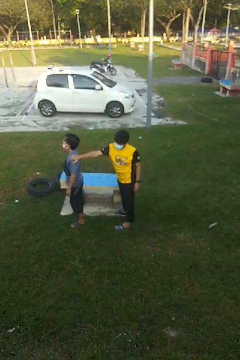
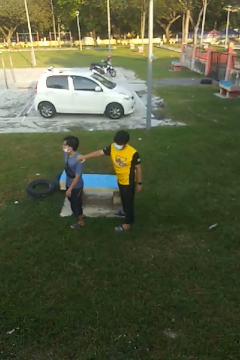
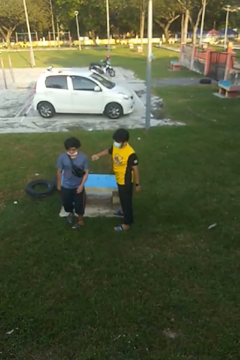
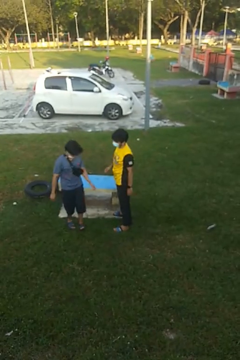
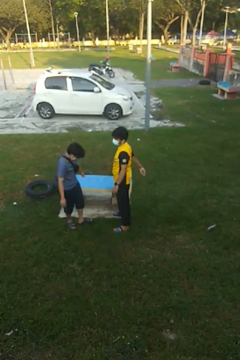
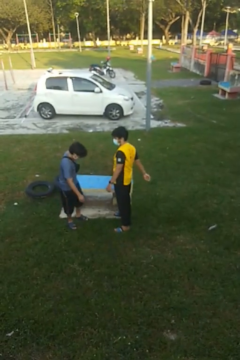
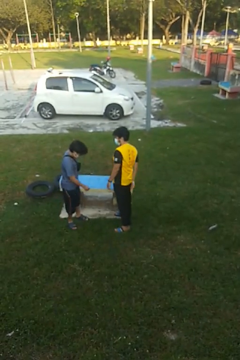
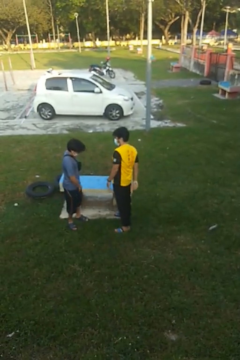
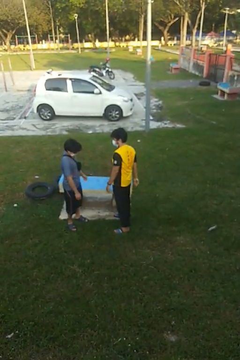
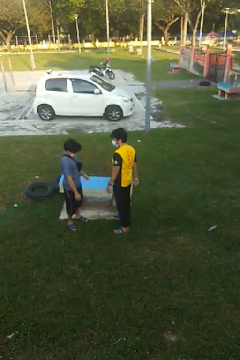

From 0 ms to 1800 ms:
person spins person around

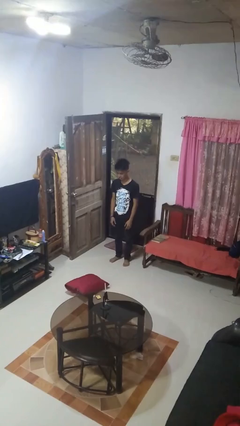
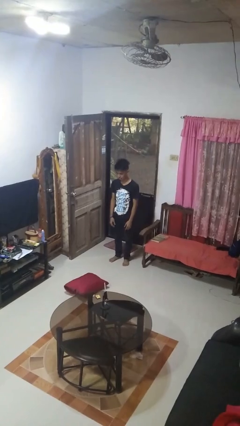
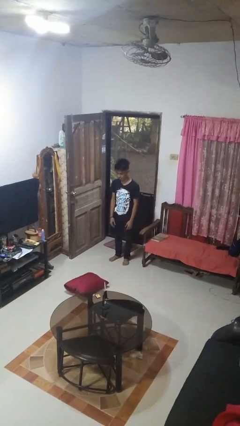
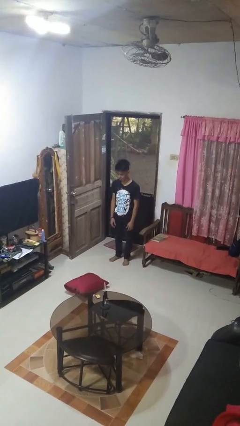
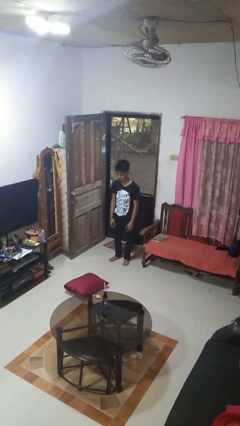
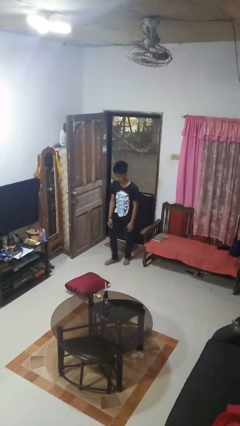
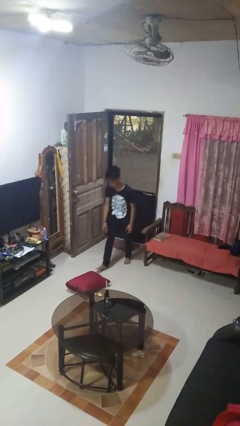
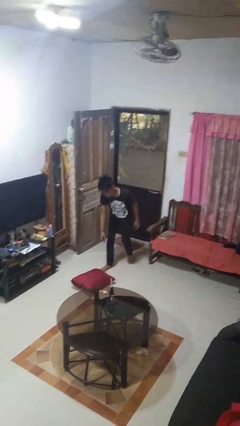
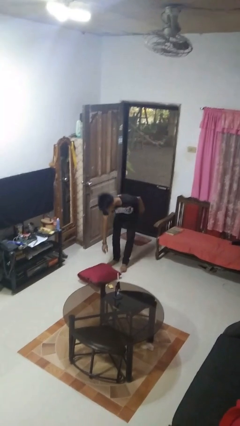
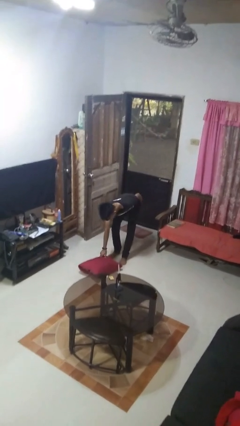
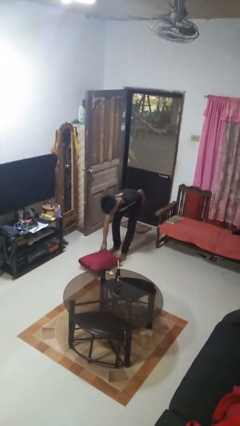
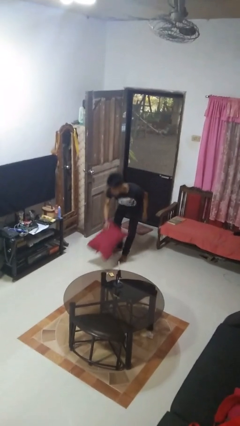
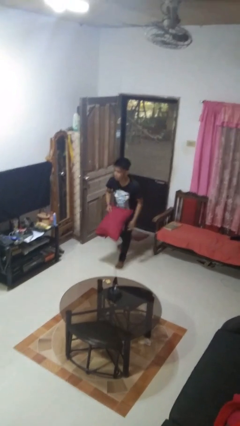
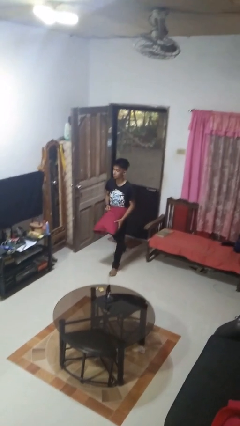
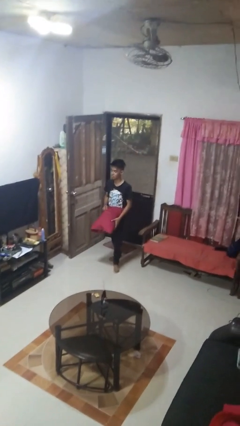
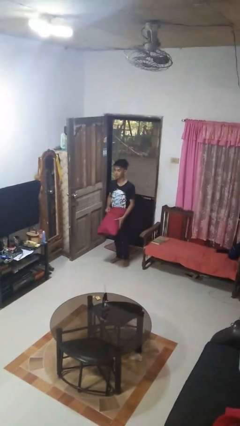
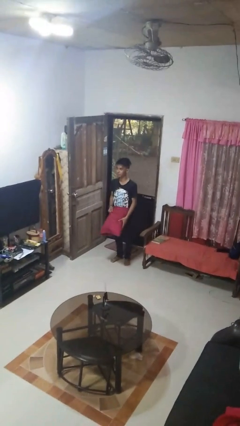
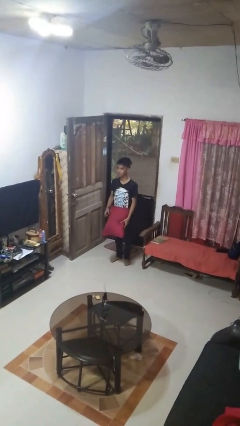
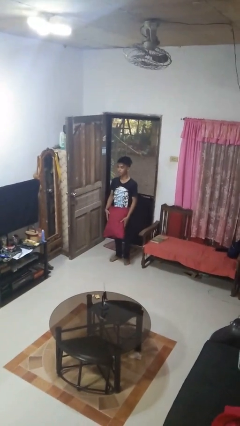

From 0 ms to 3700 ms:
person picks up object from floor

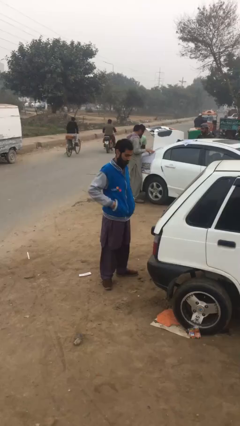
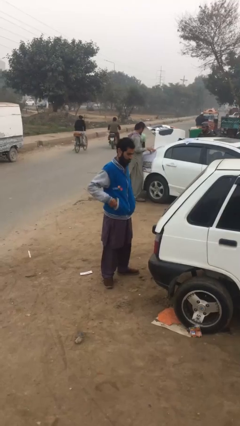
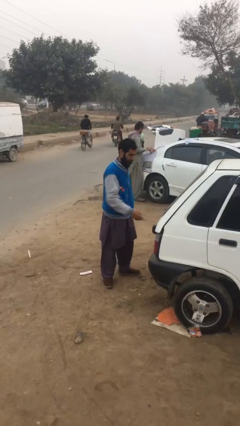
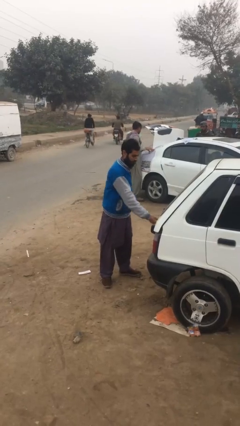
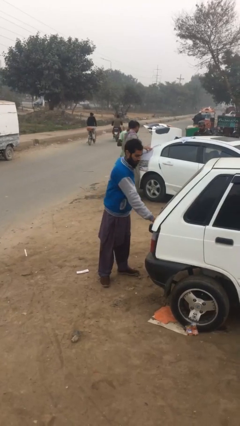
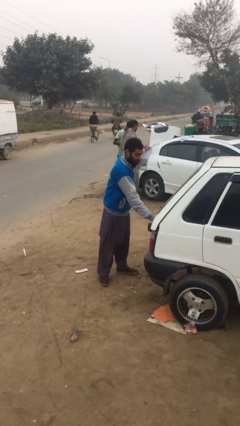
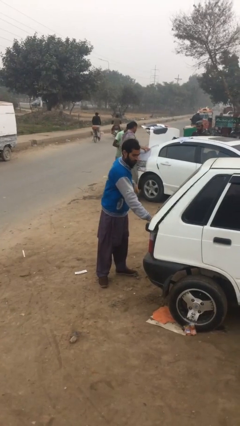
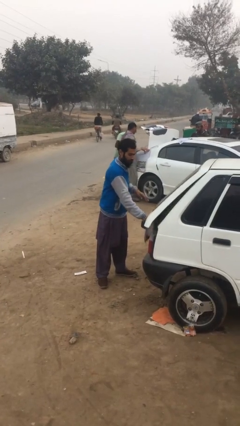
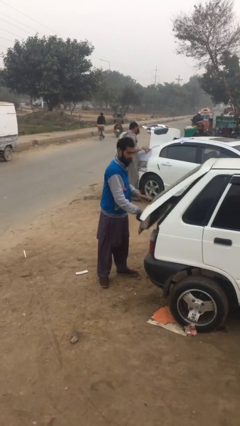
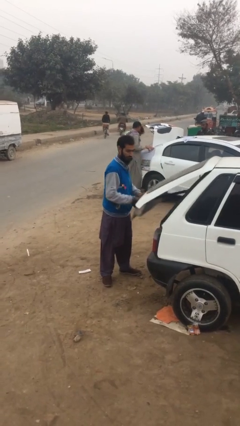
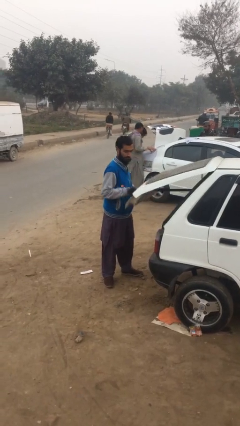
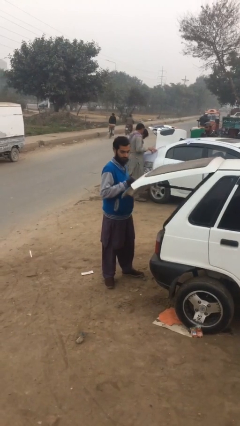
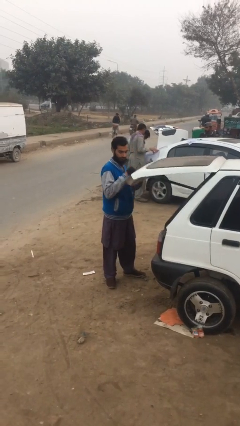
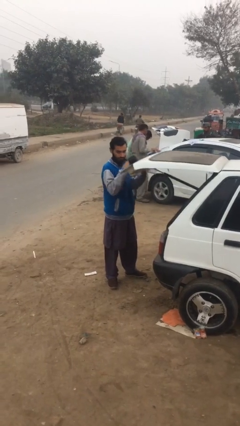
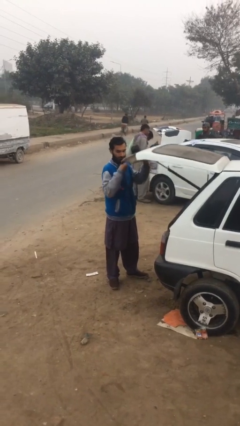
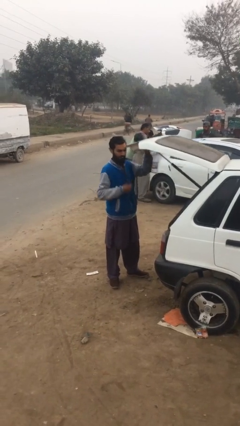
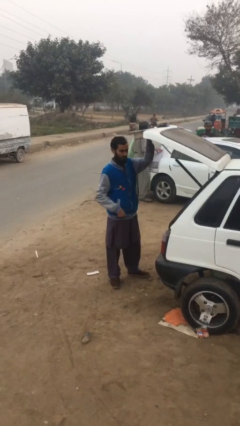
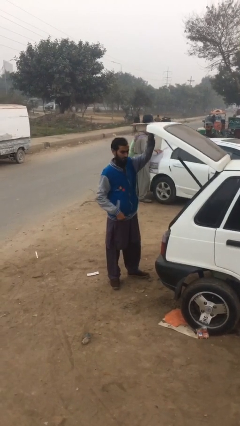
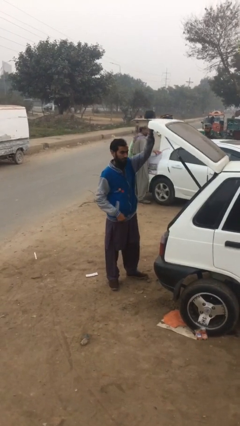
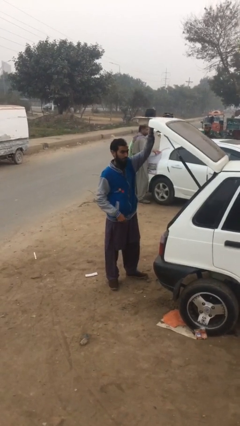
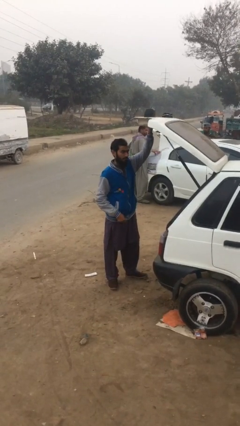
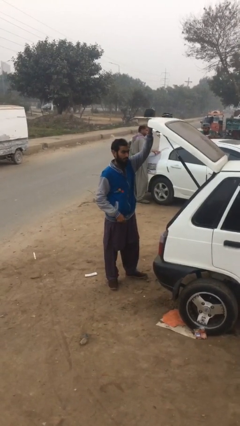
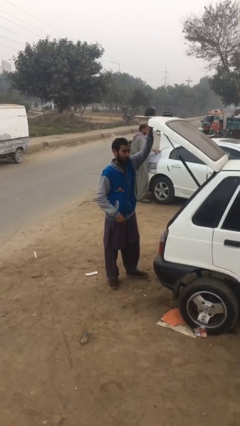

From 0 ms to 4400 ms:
person opens car trunk

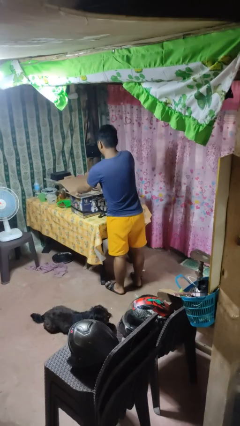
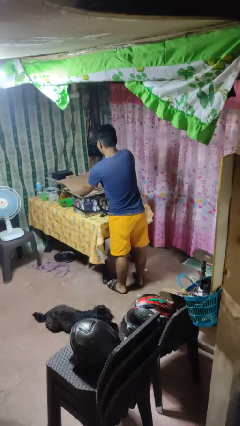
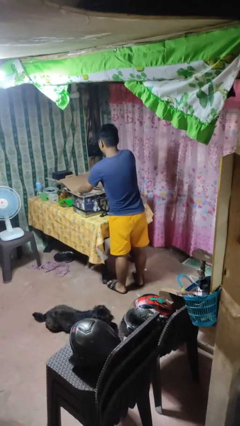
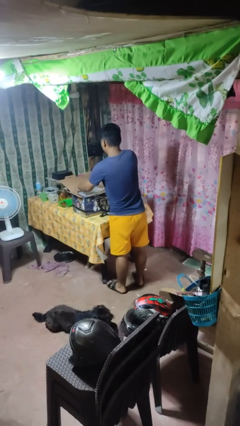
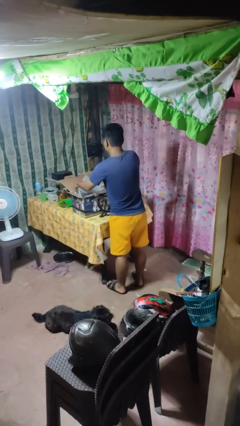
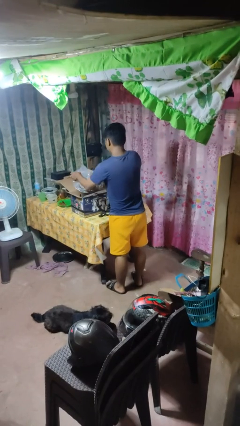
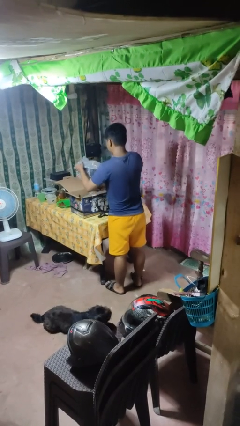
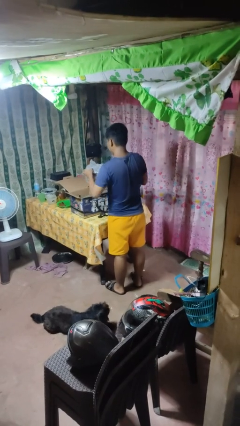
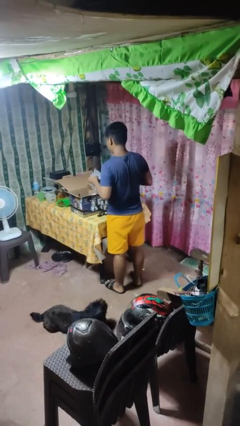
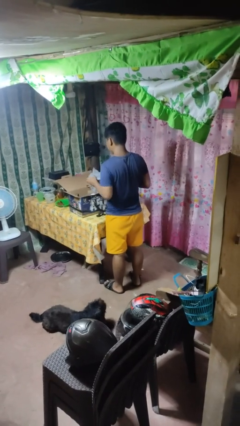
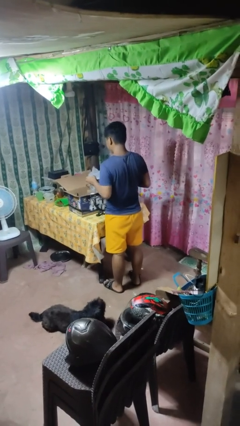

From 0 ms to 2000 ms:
person takes object from box

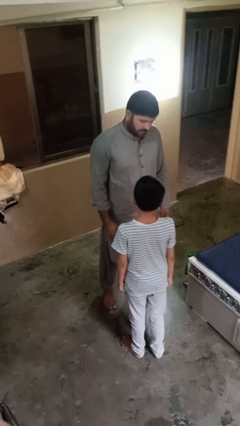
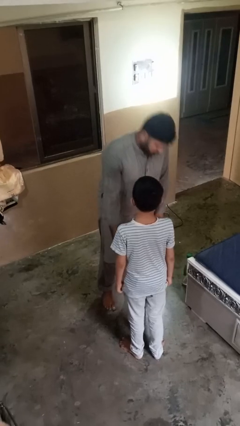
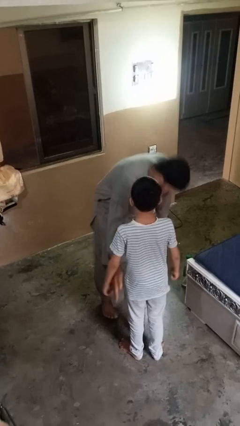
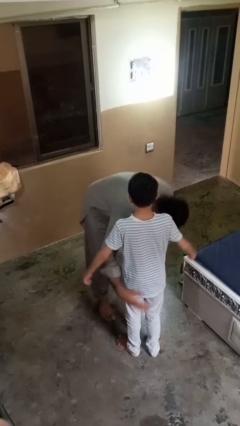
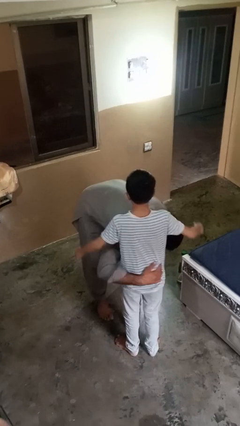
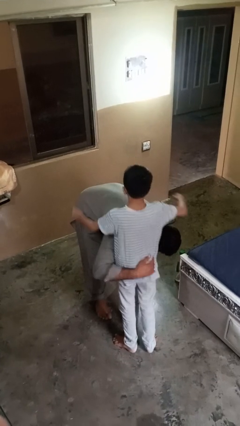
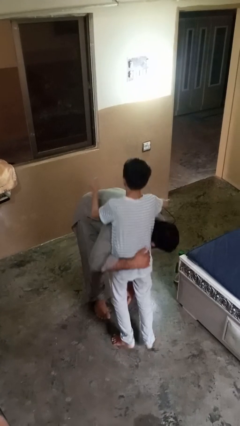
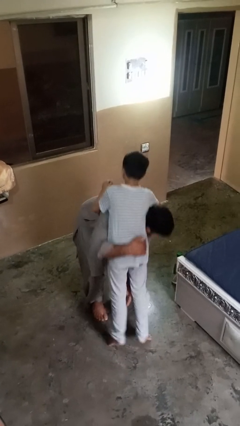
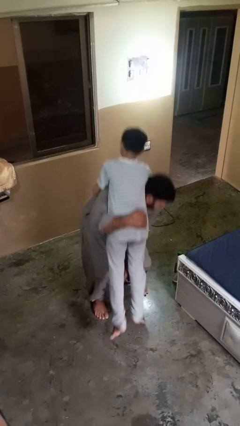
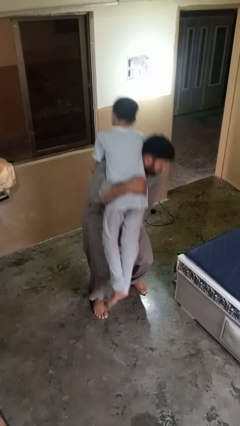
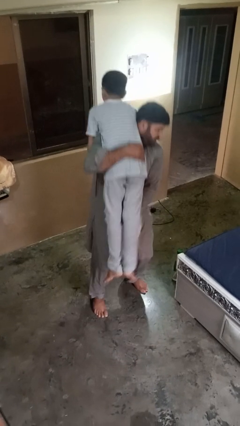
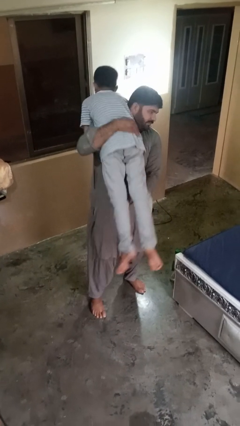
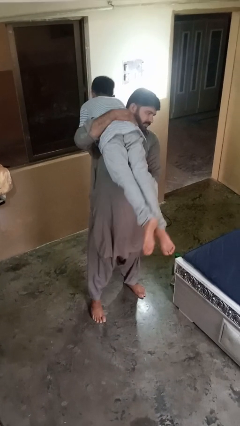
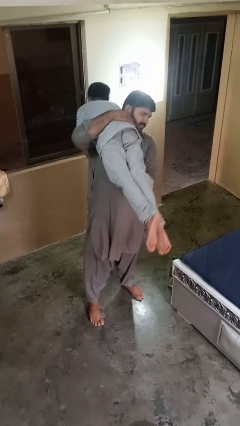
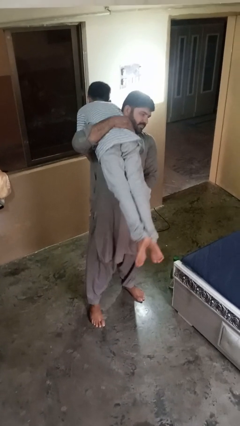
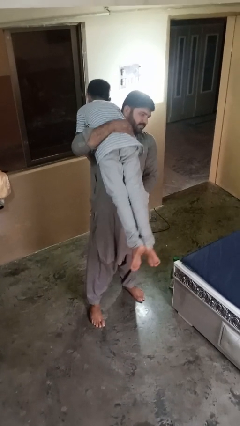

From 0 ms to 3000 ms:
person carries person on shoulders

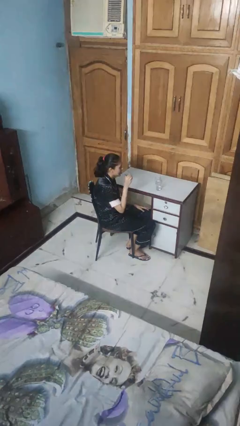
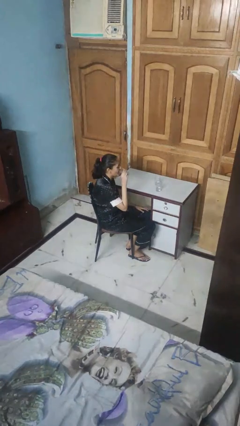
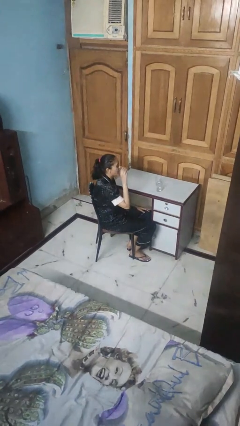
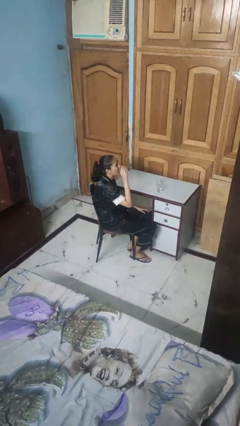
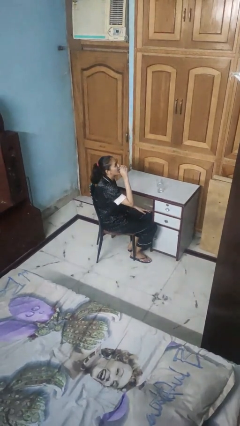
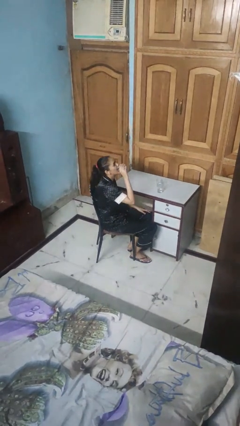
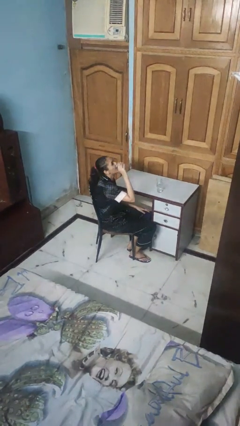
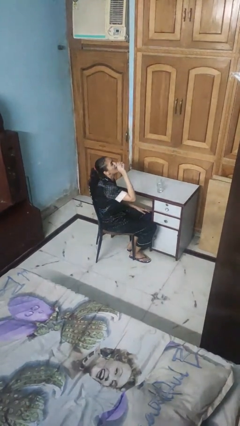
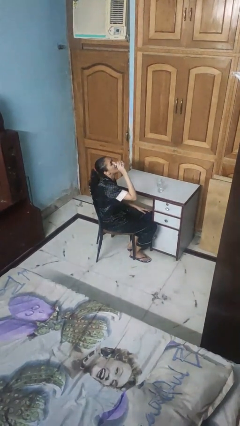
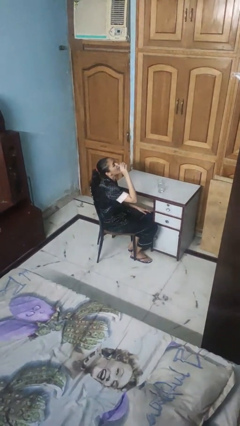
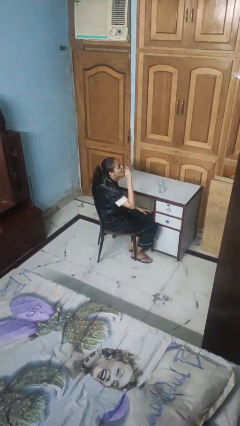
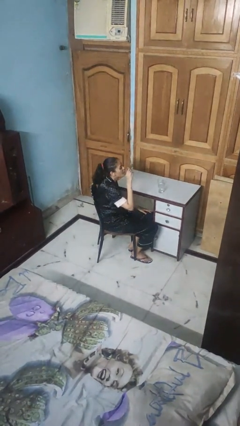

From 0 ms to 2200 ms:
person drinks from shotglass

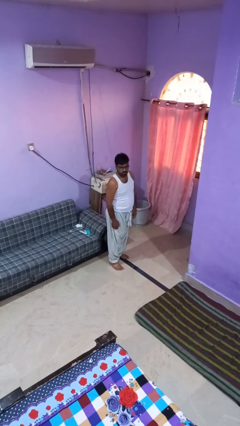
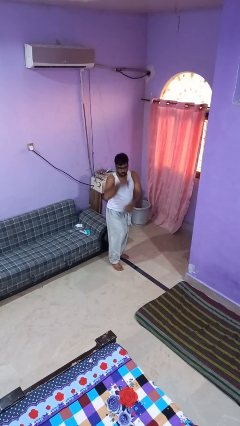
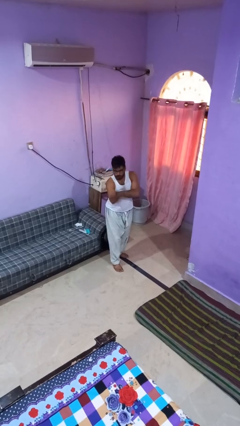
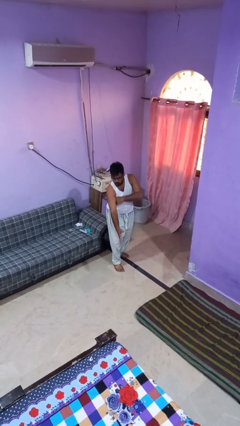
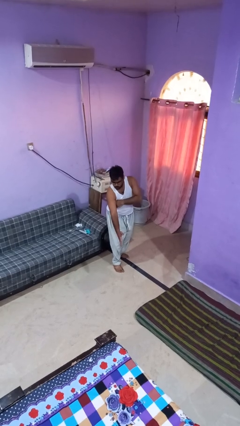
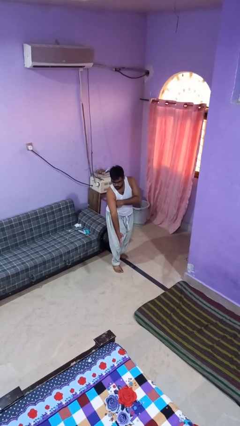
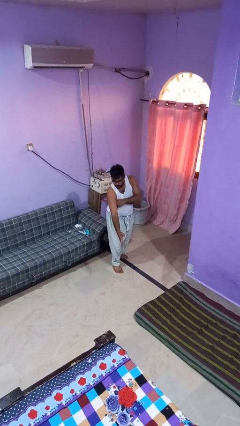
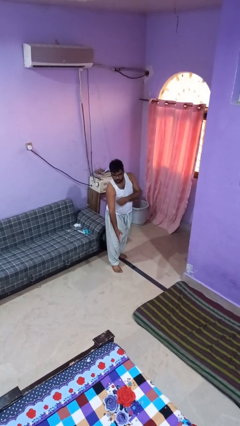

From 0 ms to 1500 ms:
person karate chop
